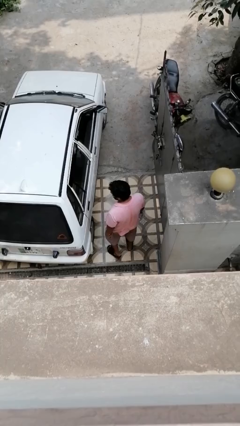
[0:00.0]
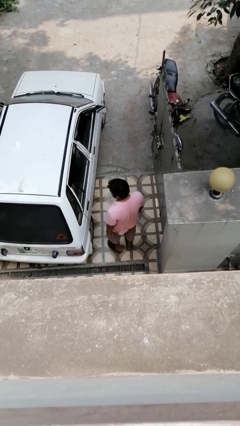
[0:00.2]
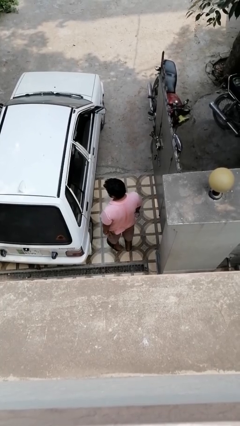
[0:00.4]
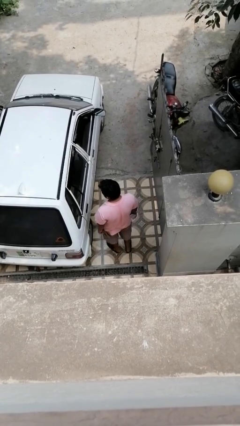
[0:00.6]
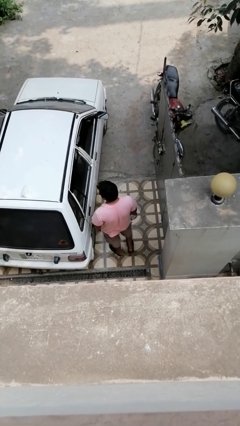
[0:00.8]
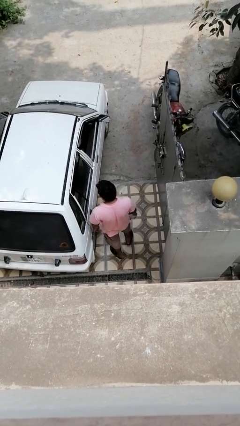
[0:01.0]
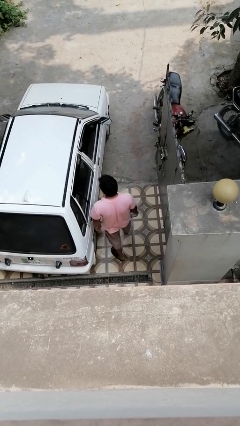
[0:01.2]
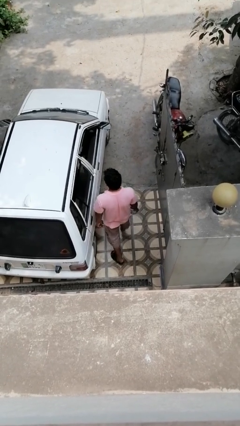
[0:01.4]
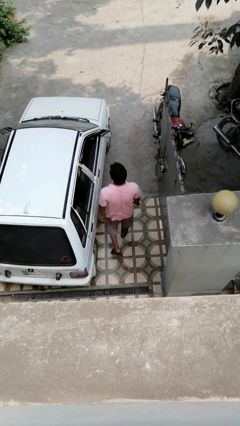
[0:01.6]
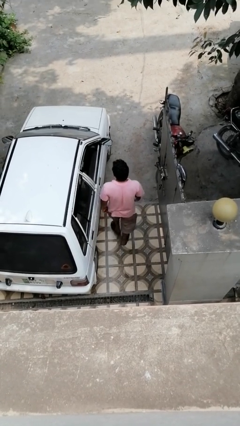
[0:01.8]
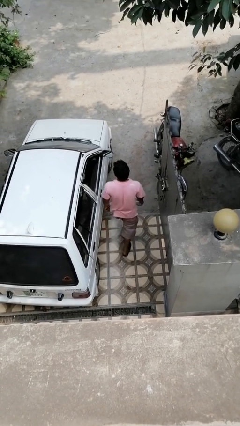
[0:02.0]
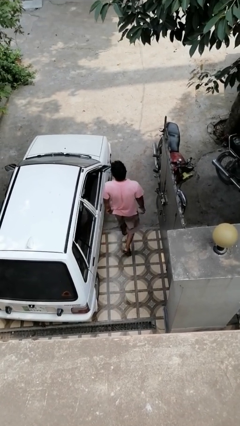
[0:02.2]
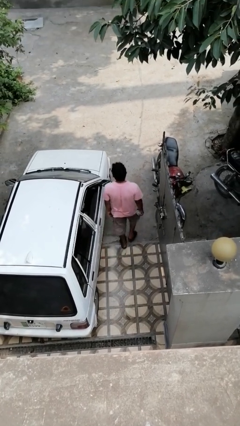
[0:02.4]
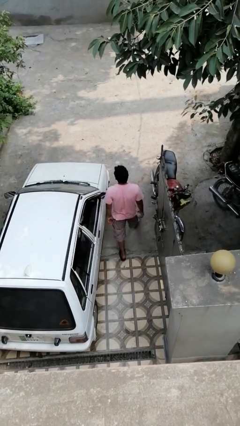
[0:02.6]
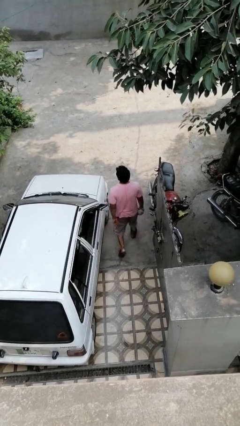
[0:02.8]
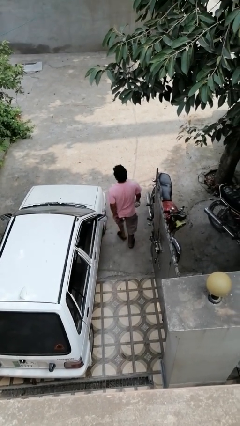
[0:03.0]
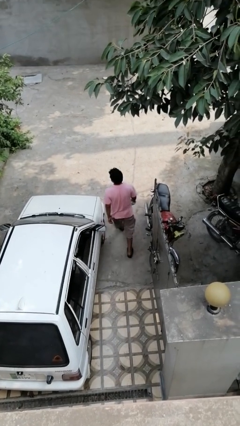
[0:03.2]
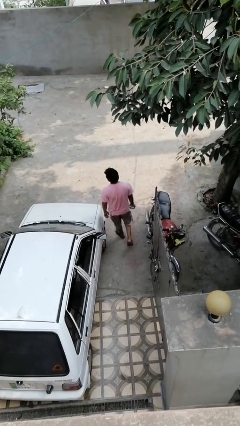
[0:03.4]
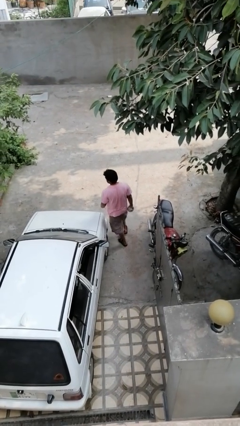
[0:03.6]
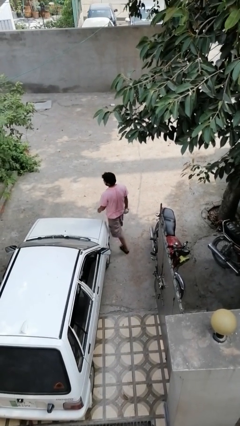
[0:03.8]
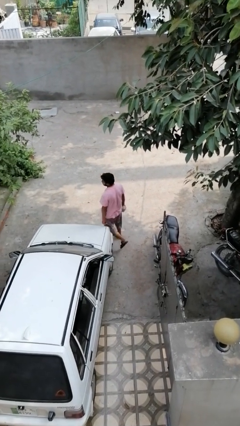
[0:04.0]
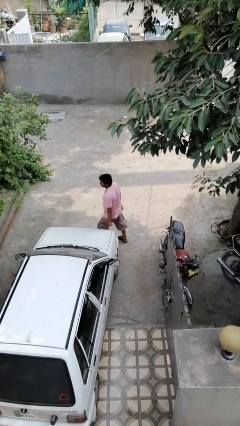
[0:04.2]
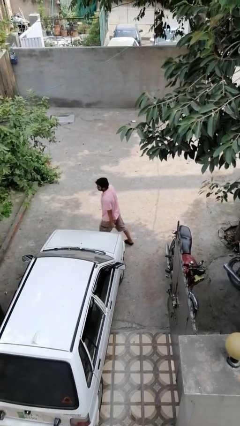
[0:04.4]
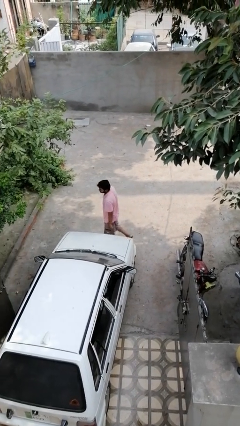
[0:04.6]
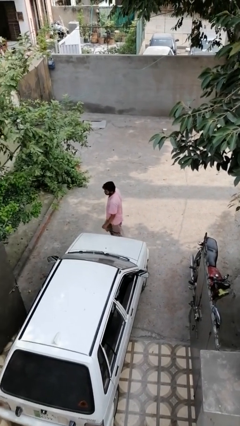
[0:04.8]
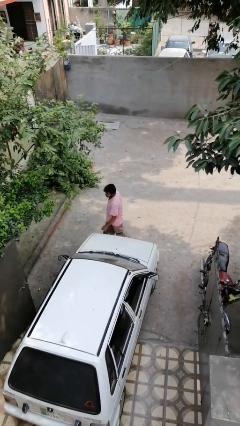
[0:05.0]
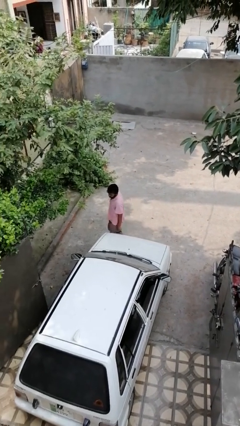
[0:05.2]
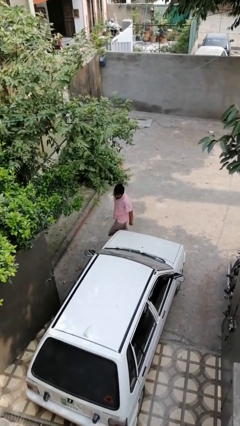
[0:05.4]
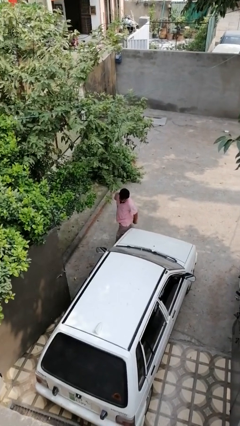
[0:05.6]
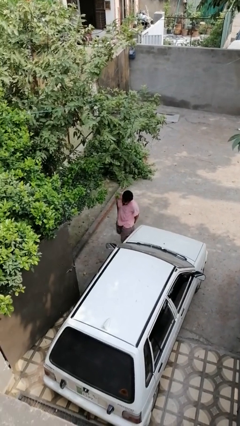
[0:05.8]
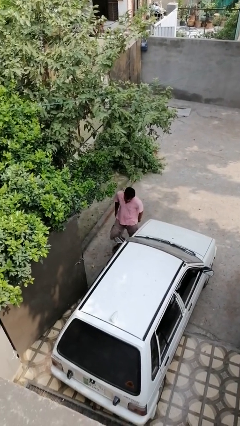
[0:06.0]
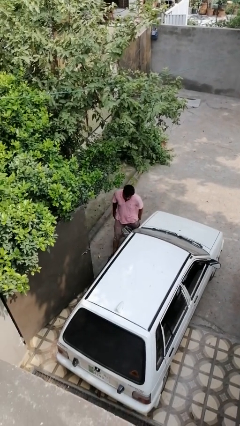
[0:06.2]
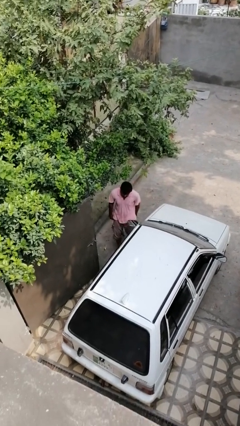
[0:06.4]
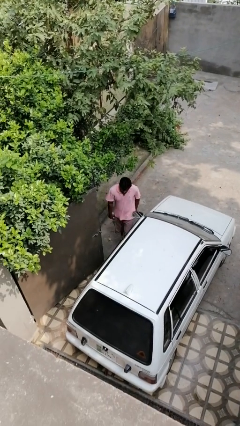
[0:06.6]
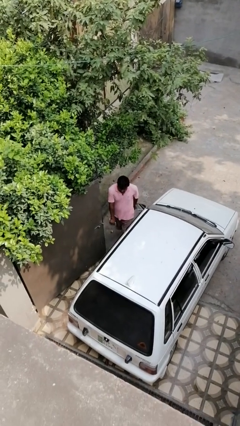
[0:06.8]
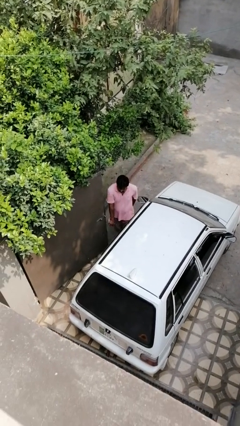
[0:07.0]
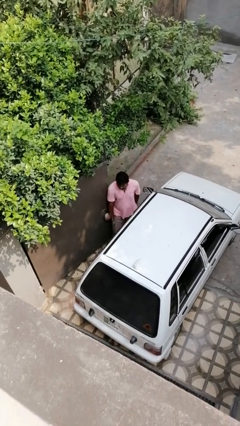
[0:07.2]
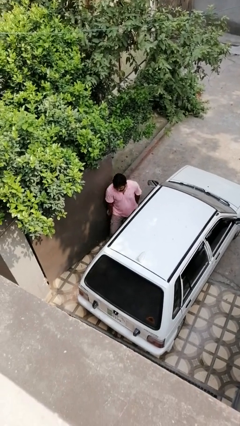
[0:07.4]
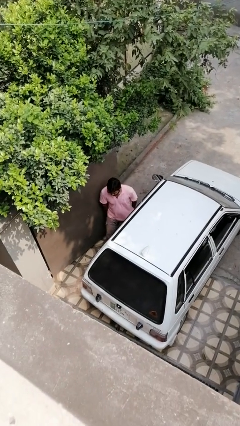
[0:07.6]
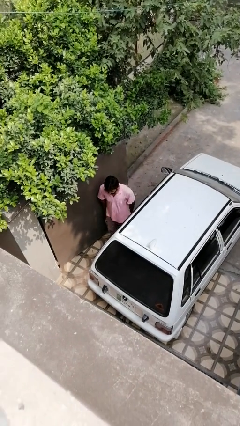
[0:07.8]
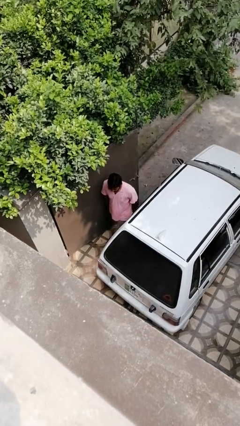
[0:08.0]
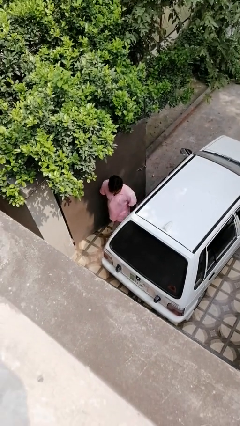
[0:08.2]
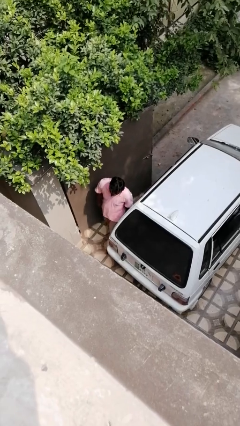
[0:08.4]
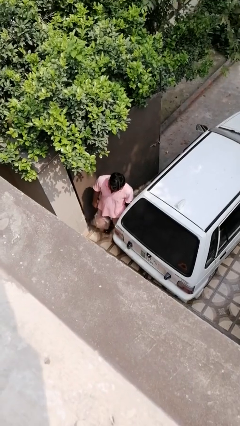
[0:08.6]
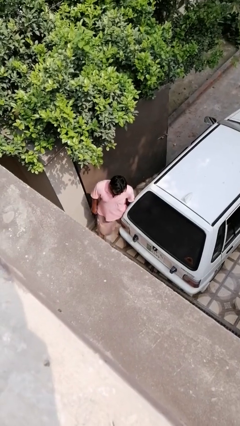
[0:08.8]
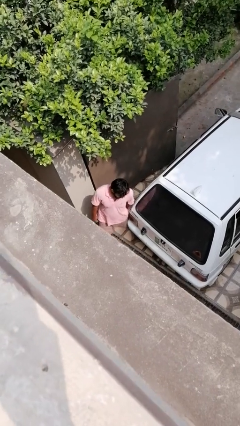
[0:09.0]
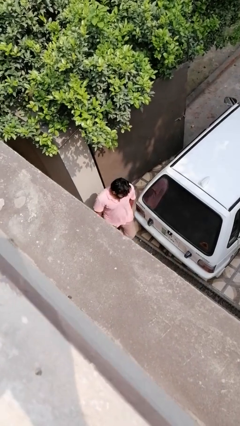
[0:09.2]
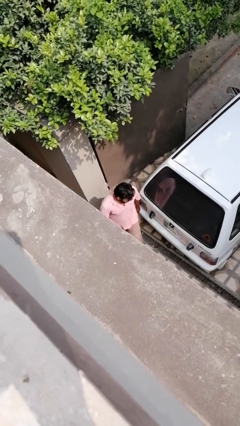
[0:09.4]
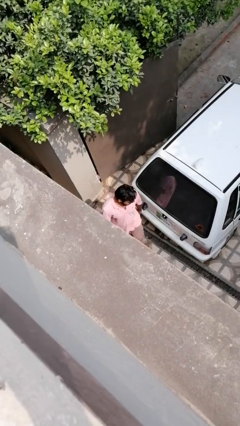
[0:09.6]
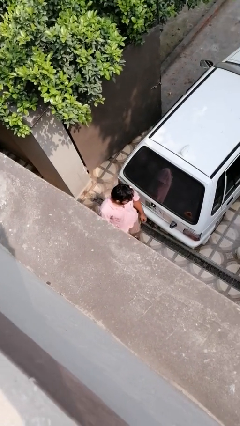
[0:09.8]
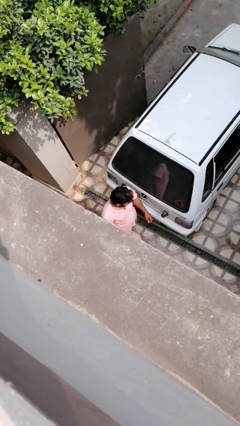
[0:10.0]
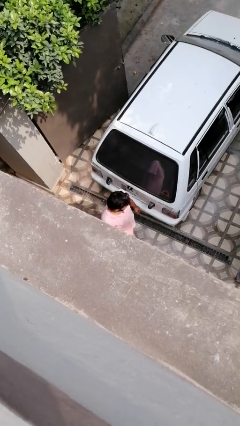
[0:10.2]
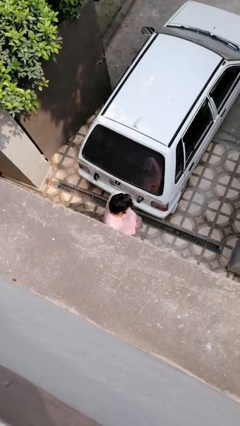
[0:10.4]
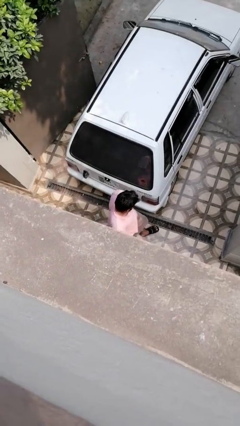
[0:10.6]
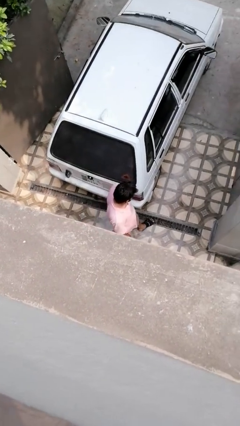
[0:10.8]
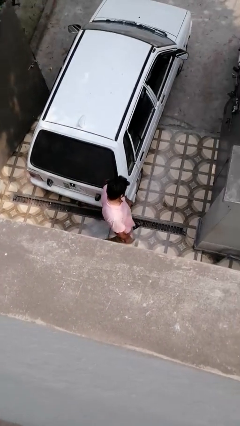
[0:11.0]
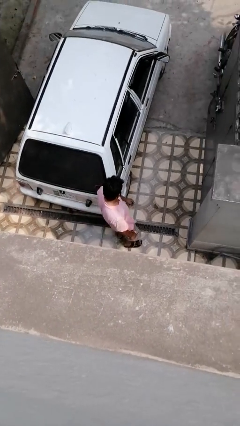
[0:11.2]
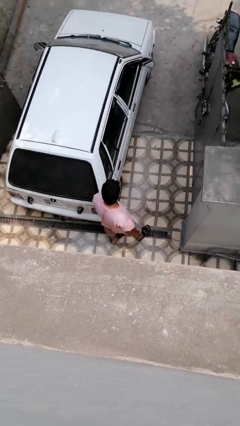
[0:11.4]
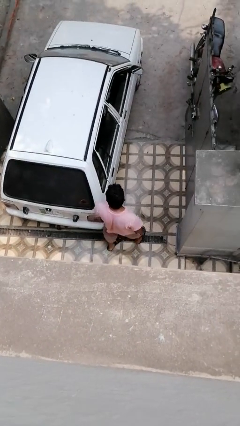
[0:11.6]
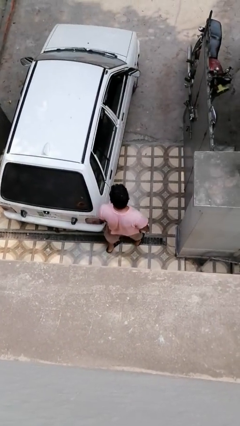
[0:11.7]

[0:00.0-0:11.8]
person walks around car

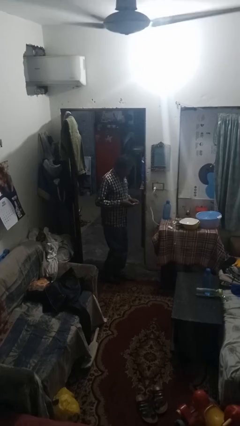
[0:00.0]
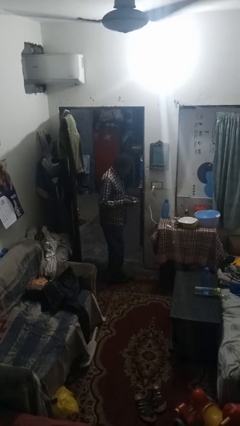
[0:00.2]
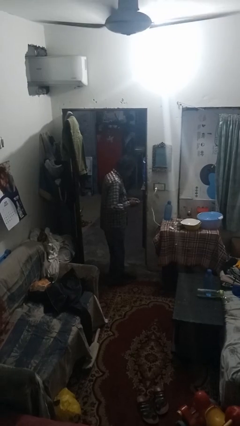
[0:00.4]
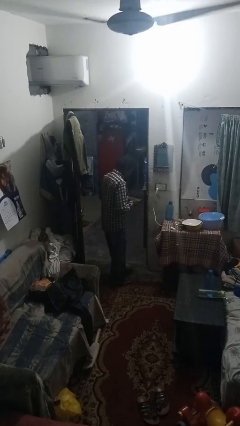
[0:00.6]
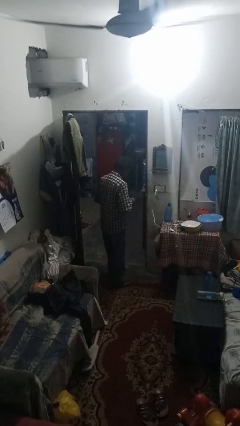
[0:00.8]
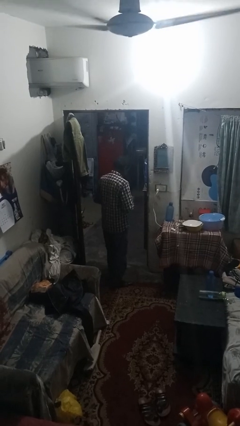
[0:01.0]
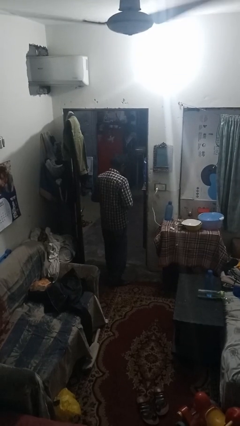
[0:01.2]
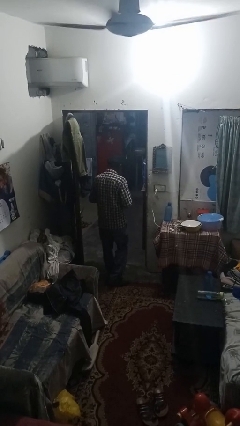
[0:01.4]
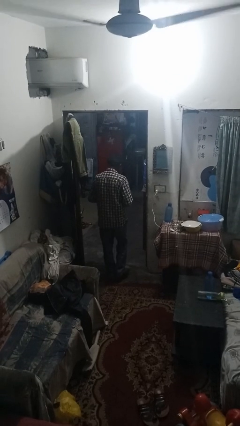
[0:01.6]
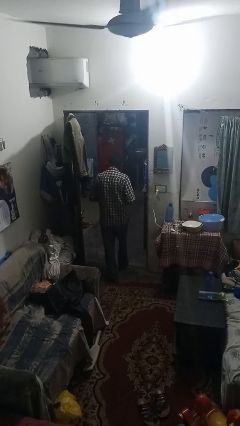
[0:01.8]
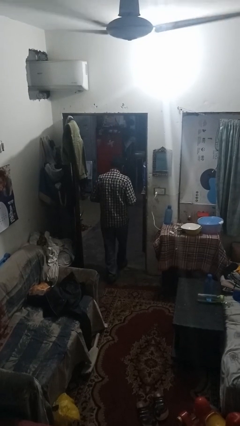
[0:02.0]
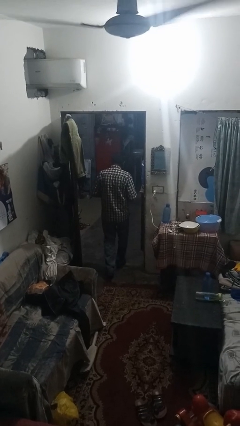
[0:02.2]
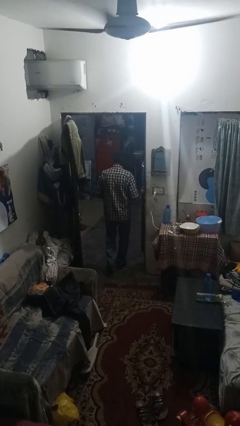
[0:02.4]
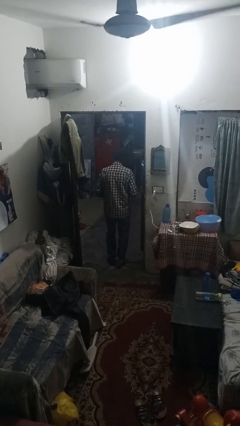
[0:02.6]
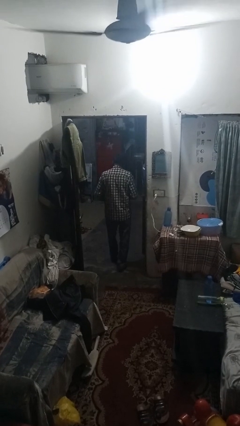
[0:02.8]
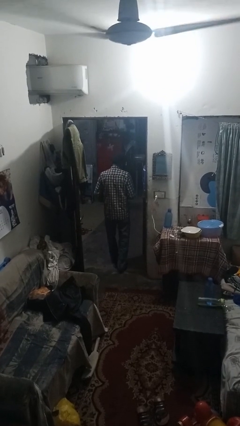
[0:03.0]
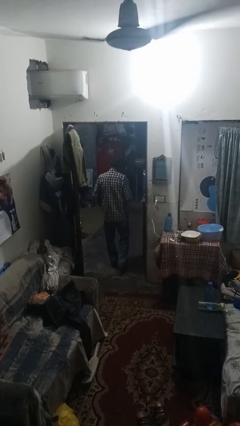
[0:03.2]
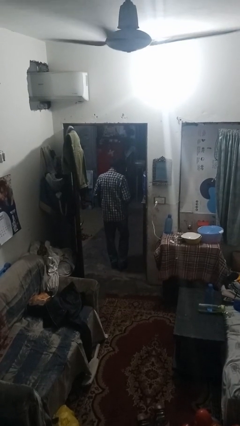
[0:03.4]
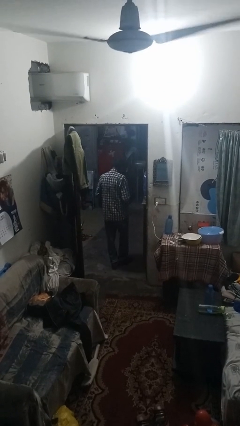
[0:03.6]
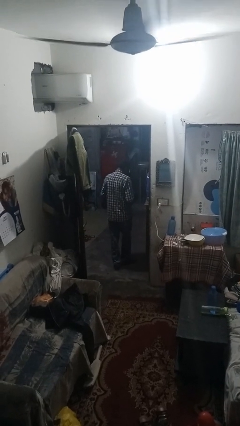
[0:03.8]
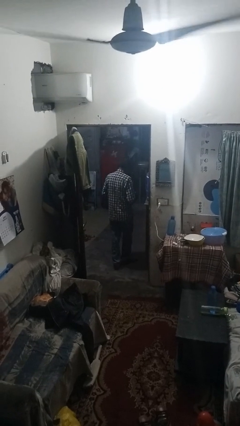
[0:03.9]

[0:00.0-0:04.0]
person exits scene through structure

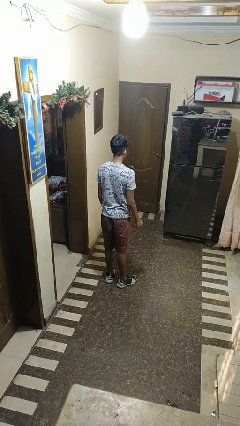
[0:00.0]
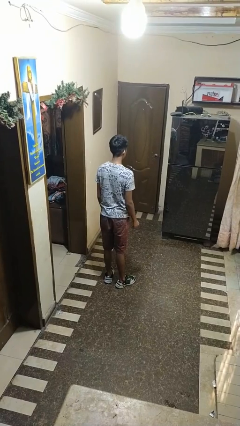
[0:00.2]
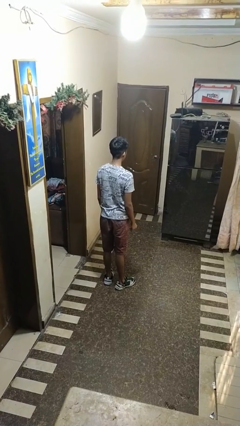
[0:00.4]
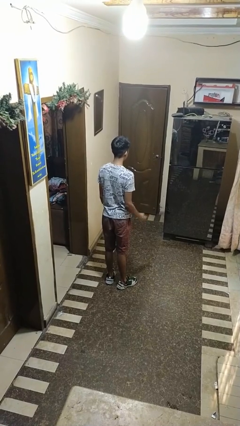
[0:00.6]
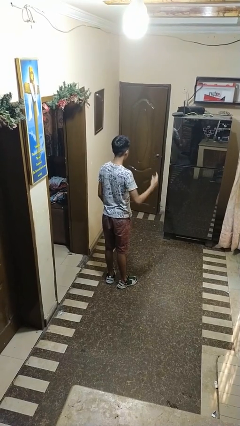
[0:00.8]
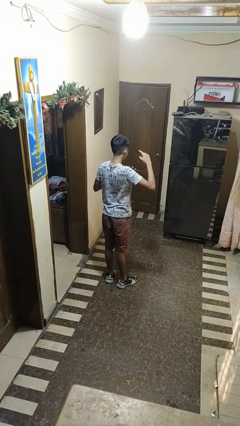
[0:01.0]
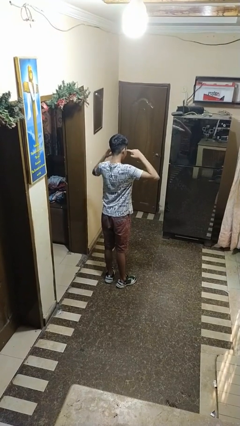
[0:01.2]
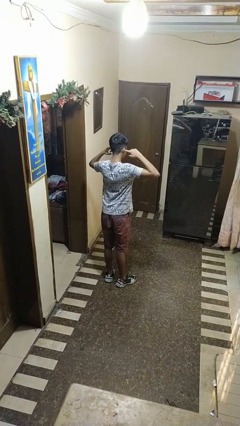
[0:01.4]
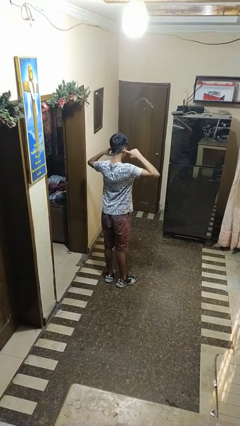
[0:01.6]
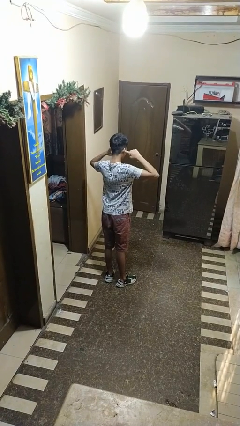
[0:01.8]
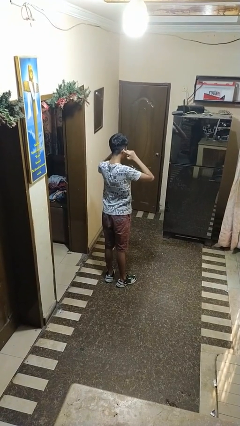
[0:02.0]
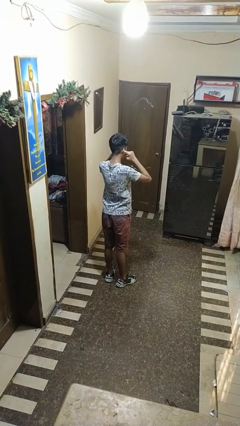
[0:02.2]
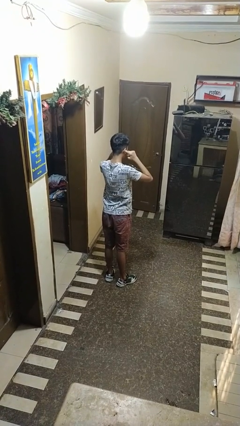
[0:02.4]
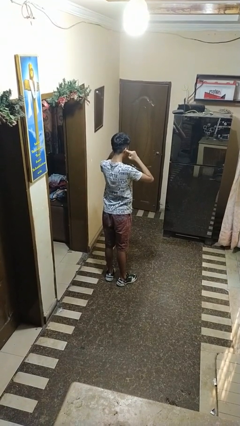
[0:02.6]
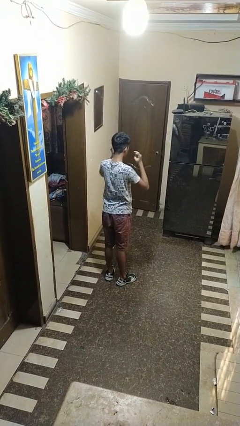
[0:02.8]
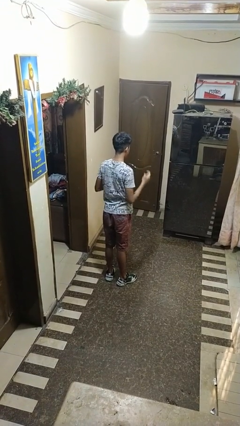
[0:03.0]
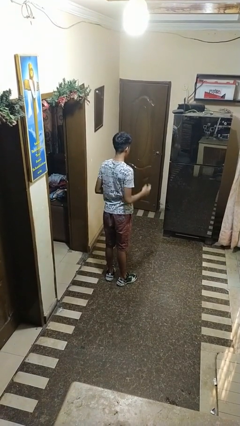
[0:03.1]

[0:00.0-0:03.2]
person puts fingers in ear
